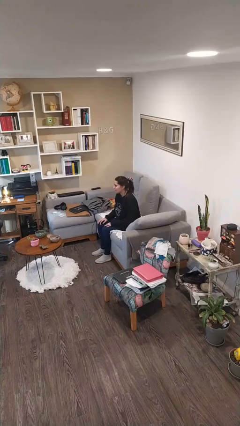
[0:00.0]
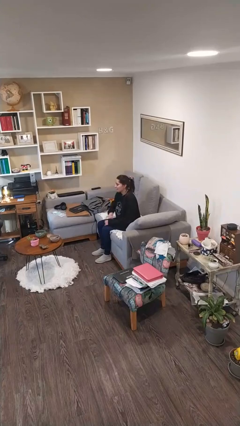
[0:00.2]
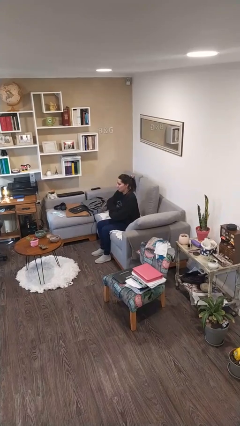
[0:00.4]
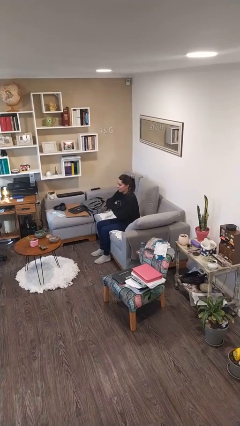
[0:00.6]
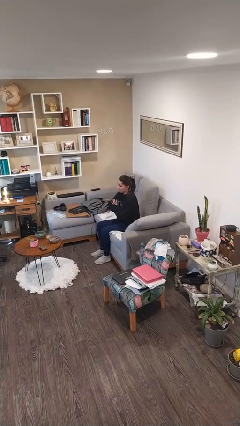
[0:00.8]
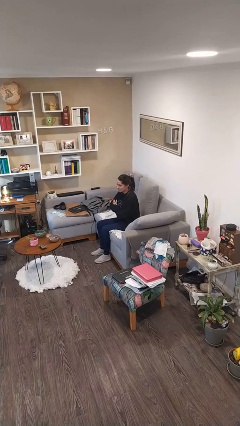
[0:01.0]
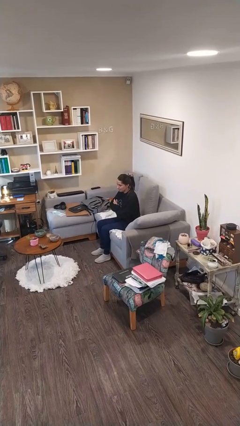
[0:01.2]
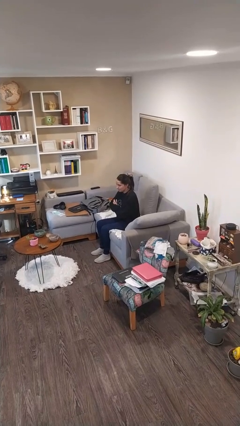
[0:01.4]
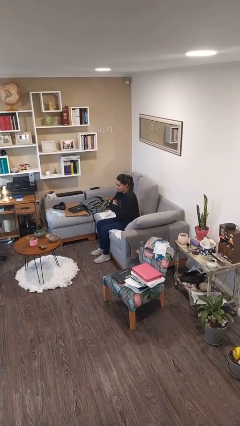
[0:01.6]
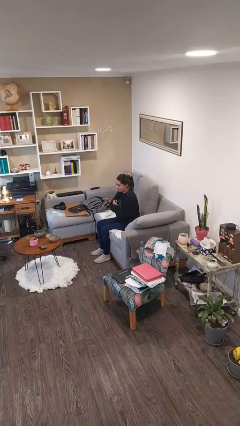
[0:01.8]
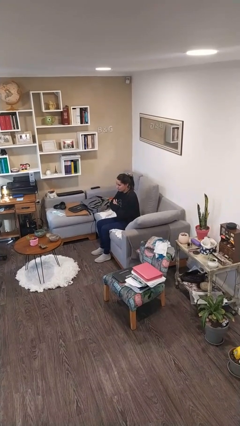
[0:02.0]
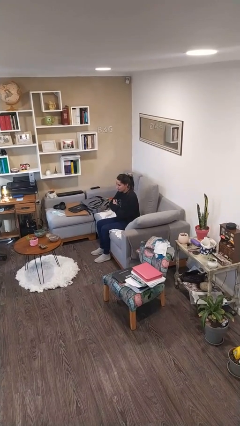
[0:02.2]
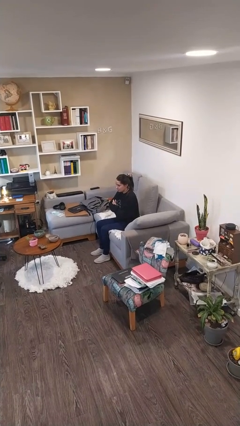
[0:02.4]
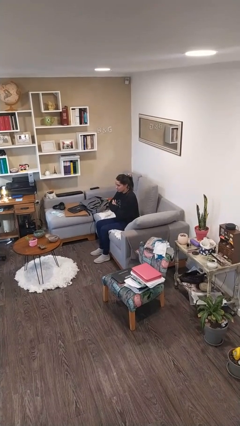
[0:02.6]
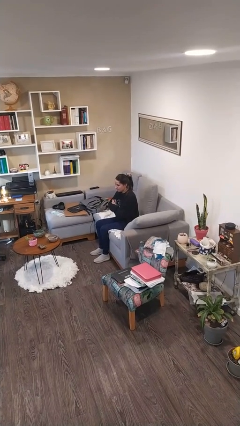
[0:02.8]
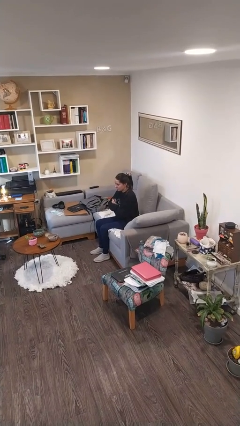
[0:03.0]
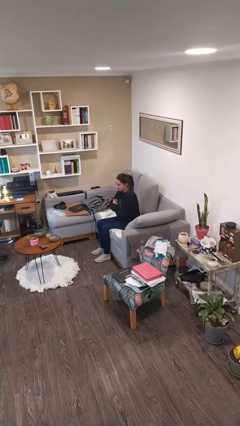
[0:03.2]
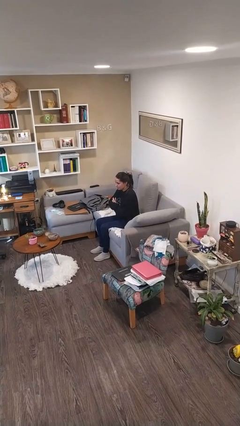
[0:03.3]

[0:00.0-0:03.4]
person crosses arms

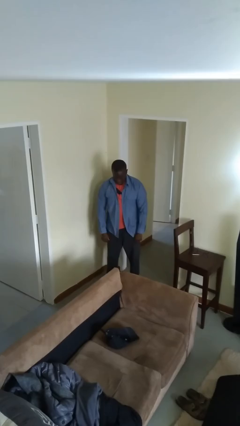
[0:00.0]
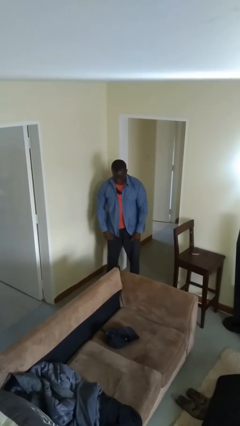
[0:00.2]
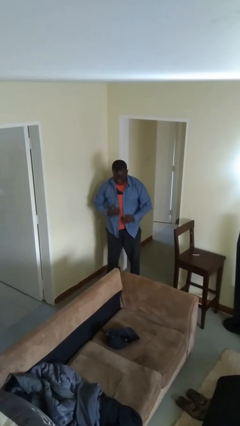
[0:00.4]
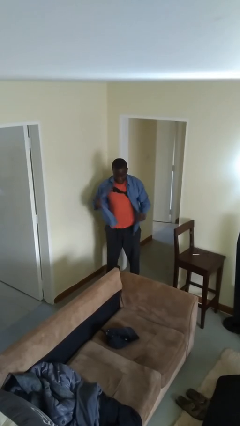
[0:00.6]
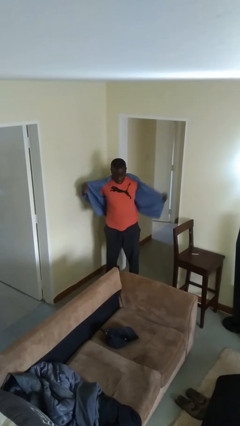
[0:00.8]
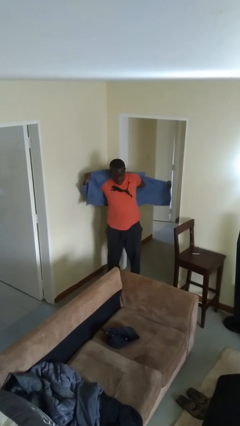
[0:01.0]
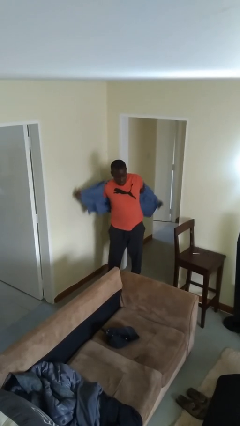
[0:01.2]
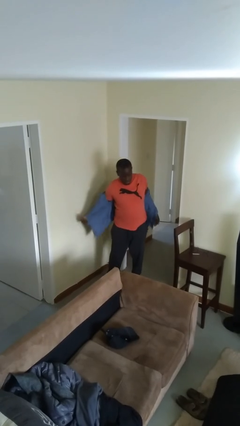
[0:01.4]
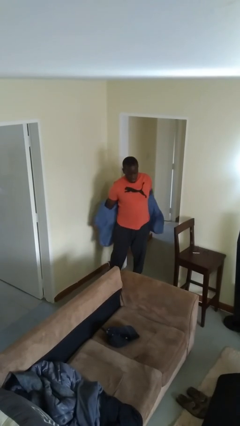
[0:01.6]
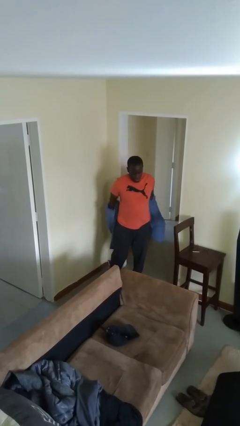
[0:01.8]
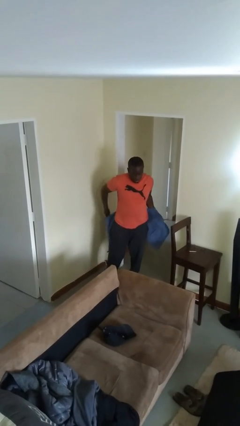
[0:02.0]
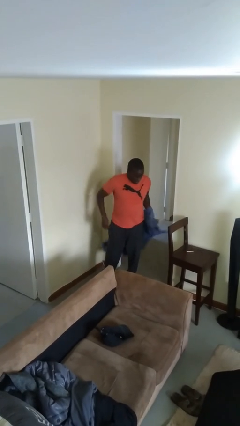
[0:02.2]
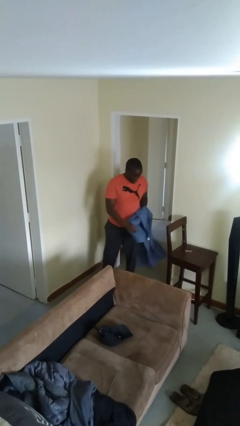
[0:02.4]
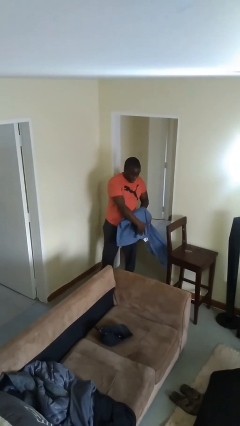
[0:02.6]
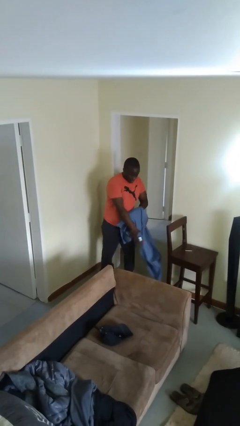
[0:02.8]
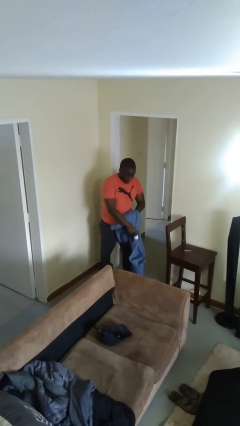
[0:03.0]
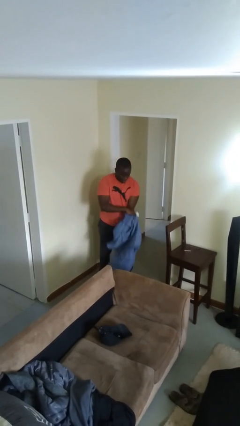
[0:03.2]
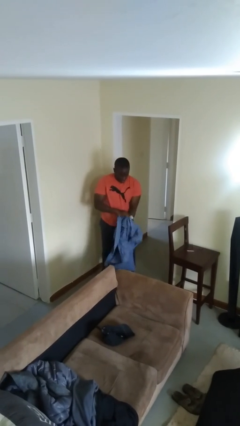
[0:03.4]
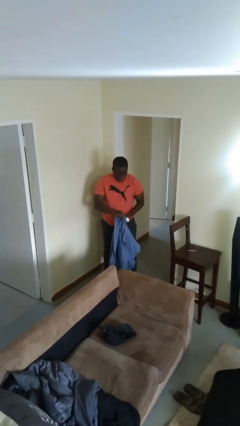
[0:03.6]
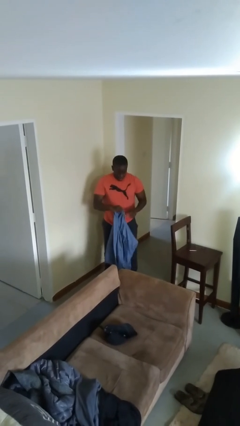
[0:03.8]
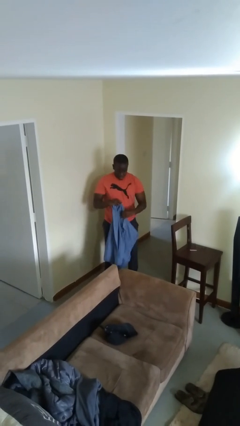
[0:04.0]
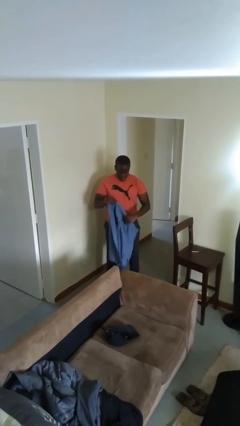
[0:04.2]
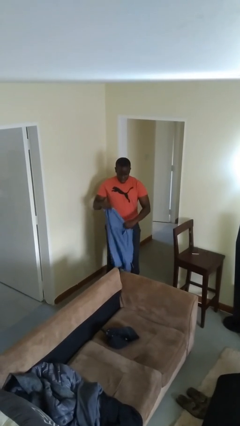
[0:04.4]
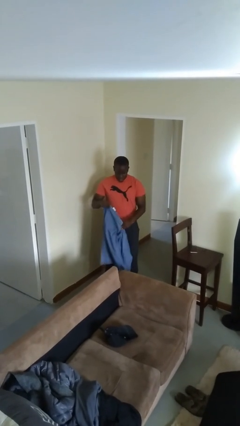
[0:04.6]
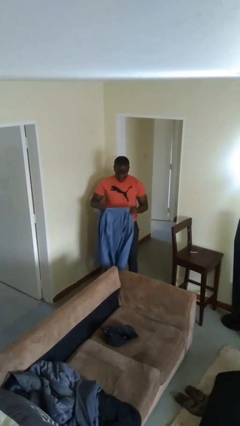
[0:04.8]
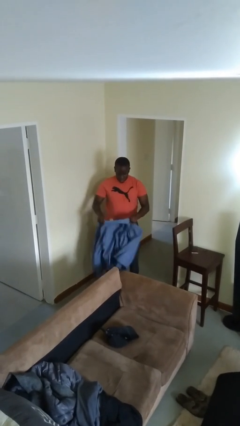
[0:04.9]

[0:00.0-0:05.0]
person takes off shirt

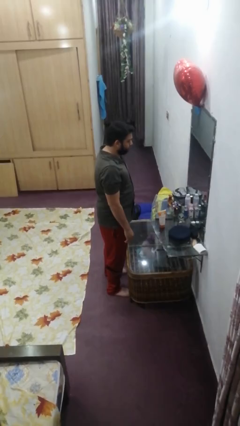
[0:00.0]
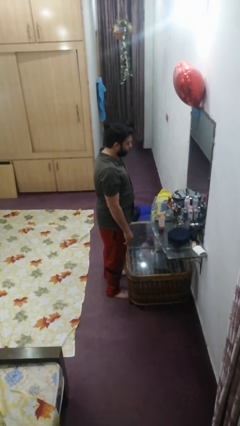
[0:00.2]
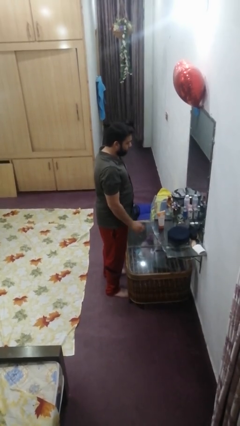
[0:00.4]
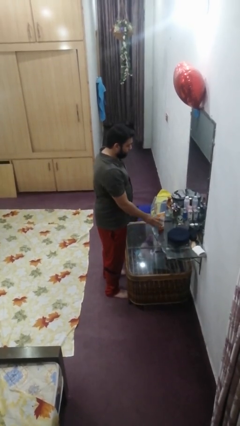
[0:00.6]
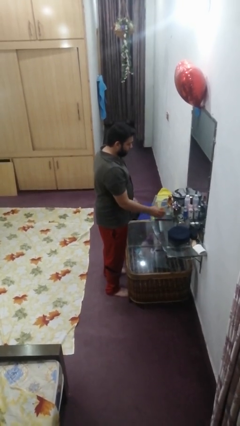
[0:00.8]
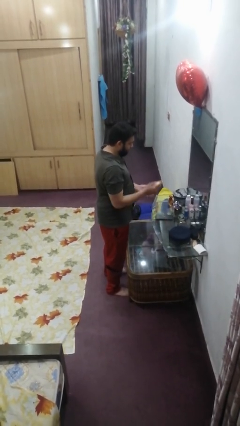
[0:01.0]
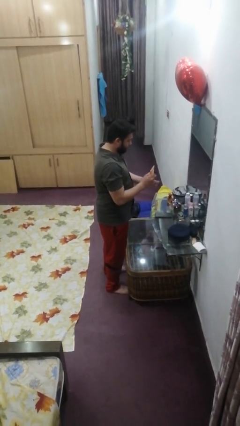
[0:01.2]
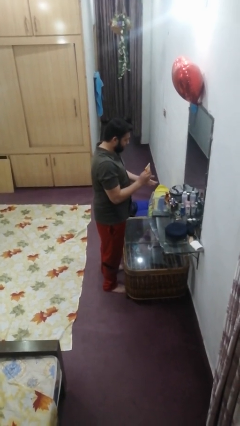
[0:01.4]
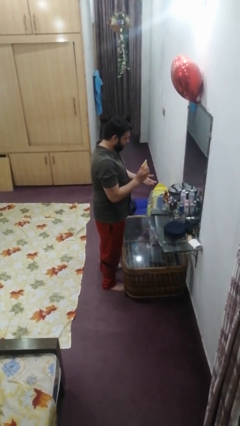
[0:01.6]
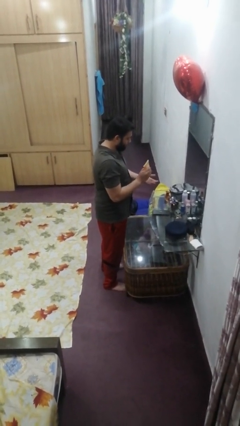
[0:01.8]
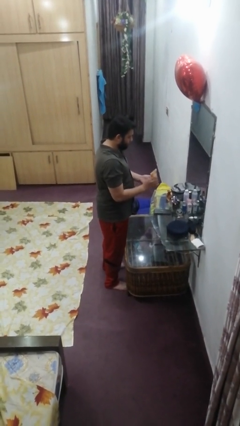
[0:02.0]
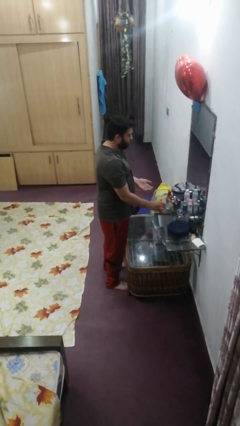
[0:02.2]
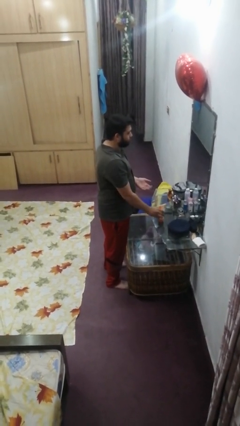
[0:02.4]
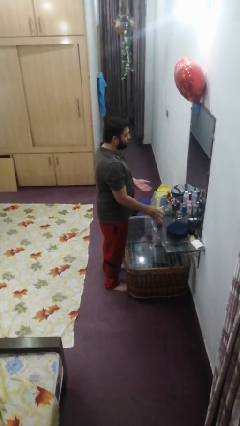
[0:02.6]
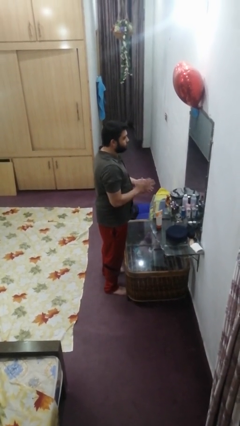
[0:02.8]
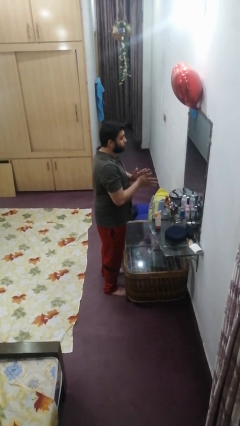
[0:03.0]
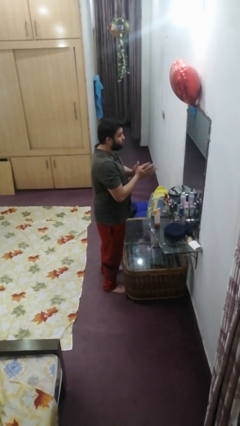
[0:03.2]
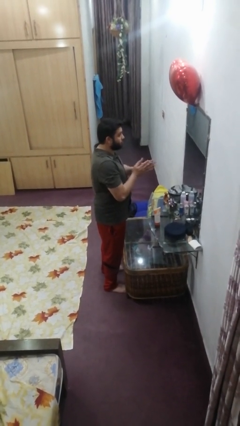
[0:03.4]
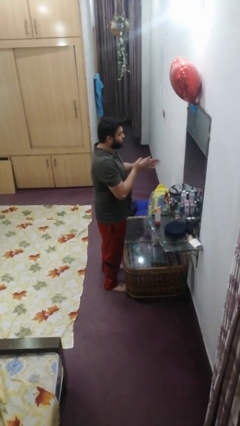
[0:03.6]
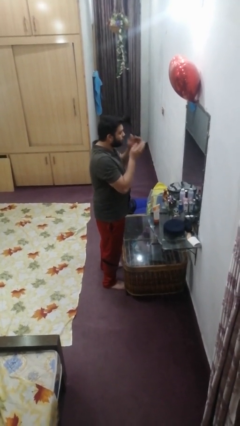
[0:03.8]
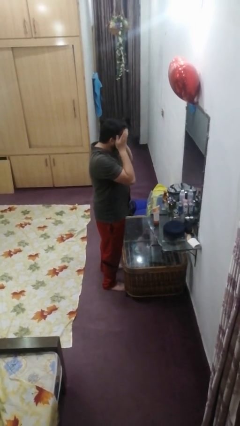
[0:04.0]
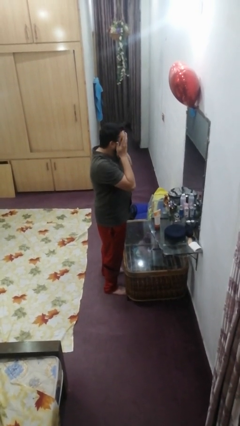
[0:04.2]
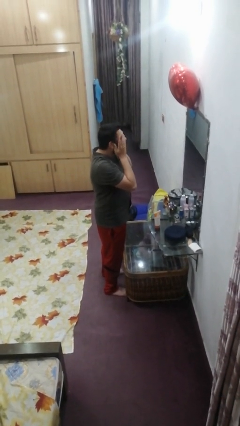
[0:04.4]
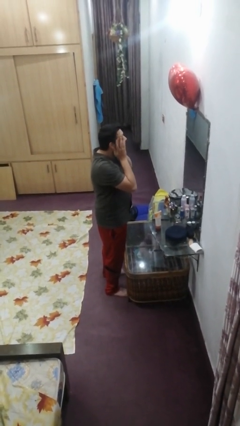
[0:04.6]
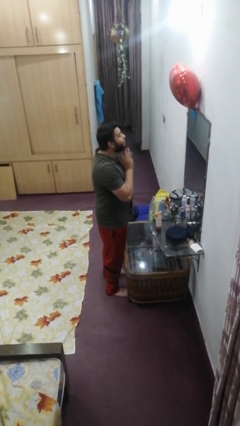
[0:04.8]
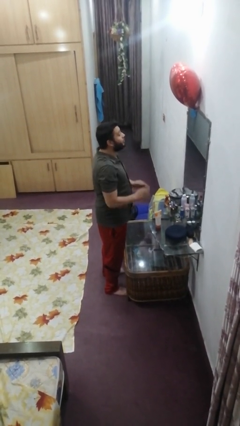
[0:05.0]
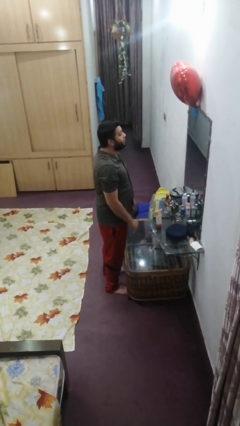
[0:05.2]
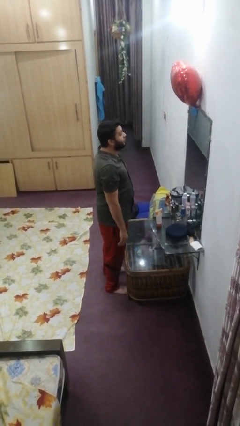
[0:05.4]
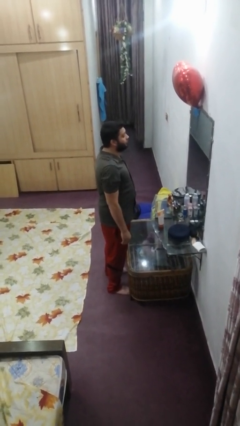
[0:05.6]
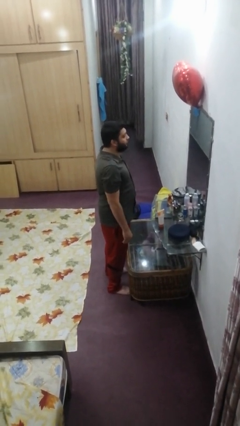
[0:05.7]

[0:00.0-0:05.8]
person applies facial moisturizer

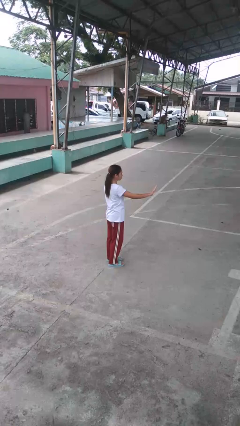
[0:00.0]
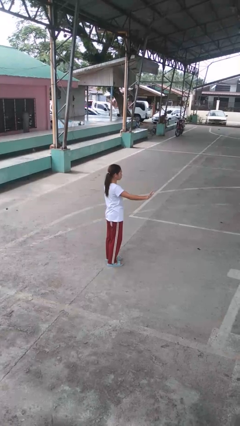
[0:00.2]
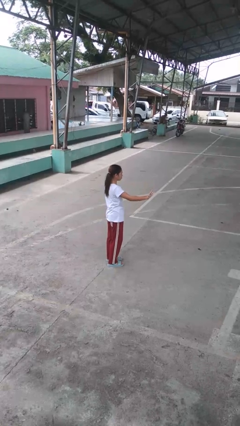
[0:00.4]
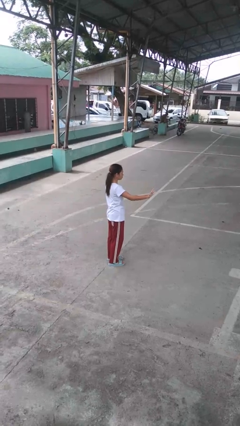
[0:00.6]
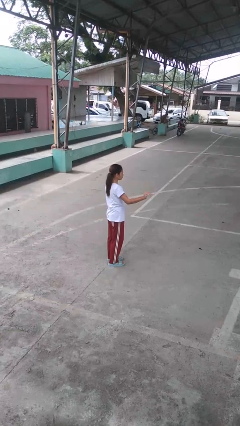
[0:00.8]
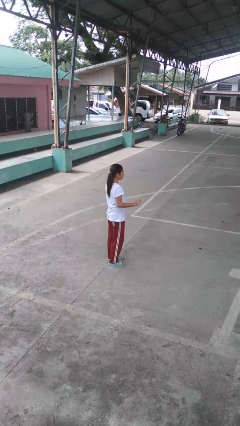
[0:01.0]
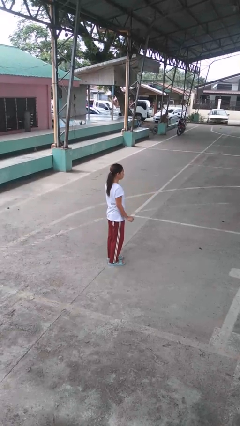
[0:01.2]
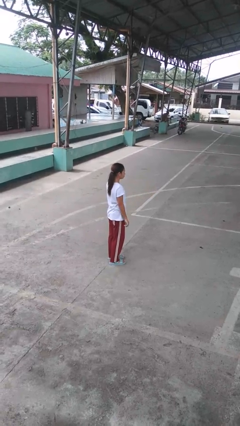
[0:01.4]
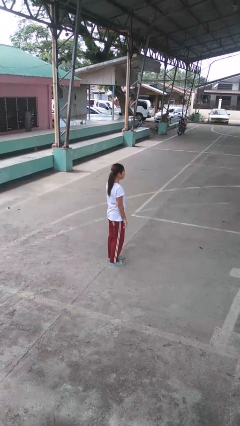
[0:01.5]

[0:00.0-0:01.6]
person gestures swipe right

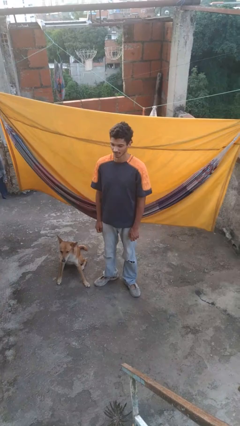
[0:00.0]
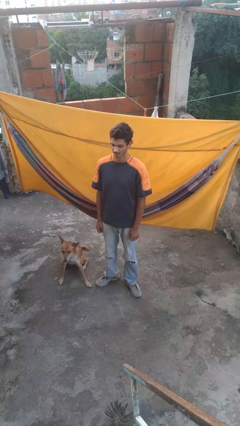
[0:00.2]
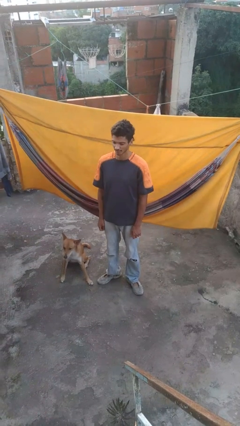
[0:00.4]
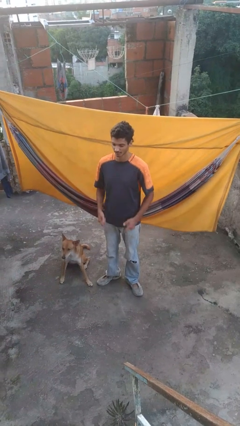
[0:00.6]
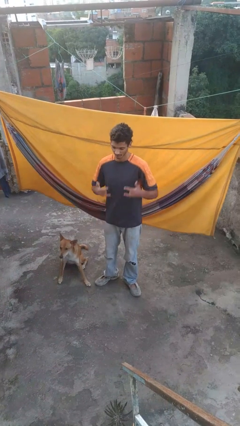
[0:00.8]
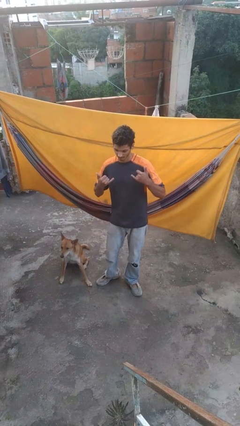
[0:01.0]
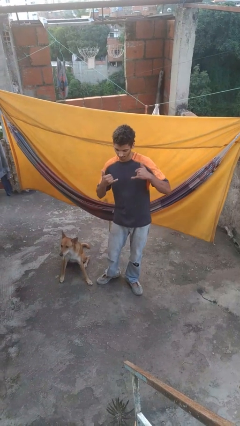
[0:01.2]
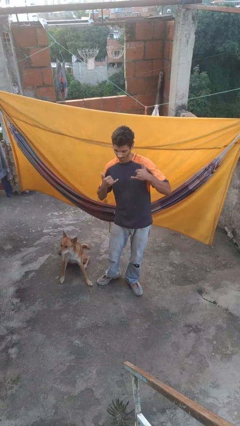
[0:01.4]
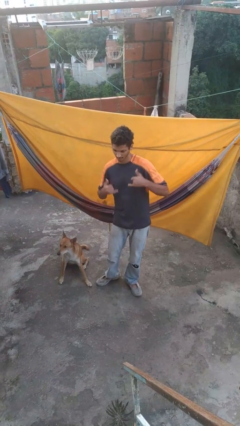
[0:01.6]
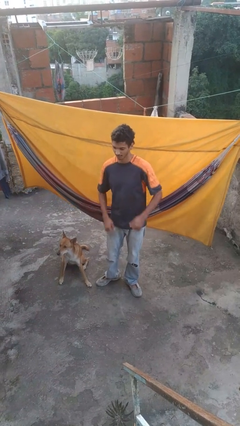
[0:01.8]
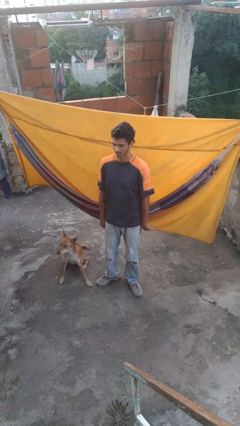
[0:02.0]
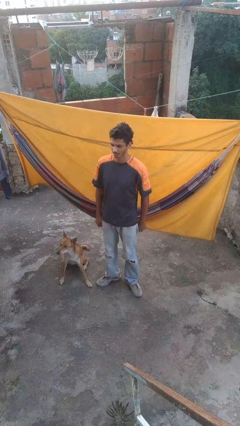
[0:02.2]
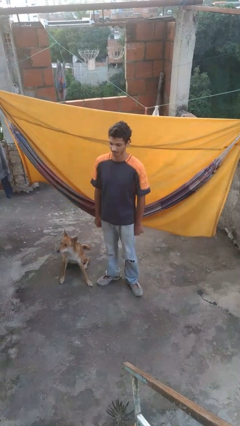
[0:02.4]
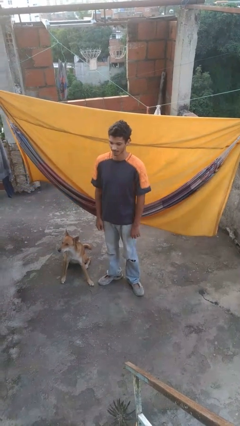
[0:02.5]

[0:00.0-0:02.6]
person gestures hang loose
